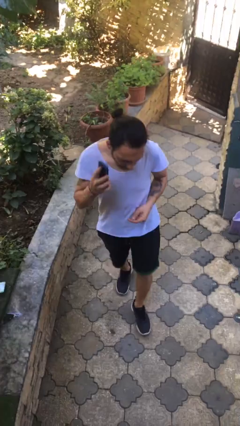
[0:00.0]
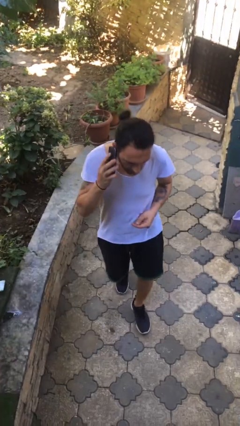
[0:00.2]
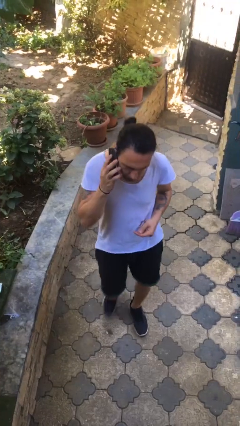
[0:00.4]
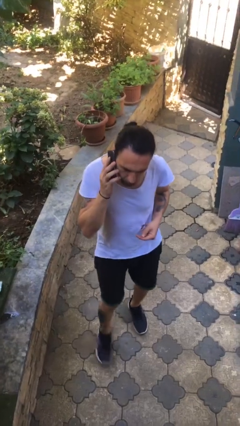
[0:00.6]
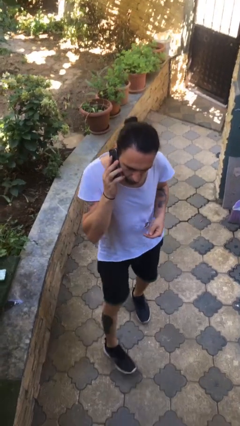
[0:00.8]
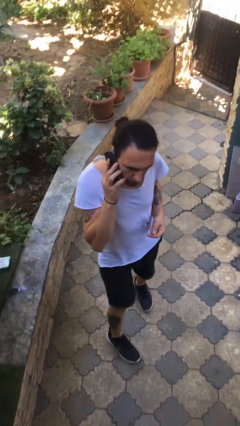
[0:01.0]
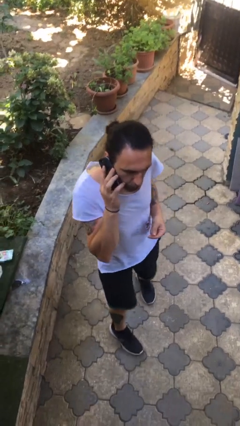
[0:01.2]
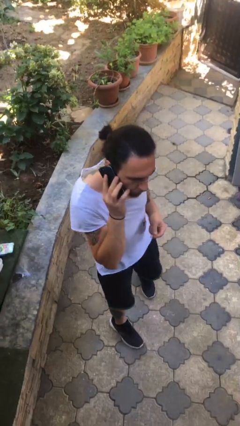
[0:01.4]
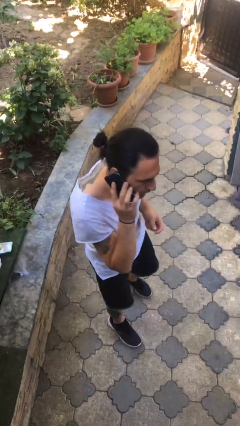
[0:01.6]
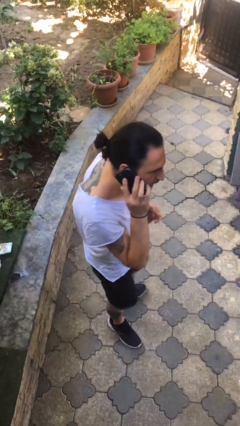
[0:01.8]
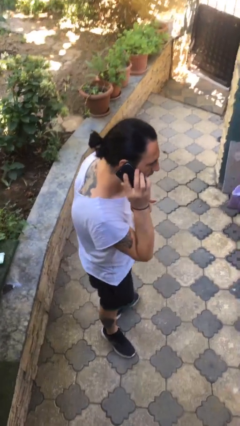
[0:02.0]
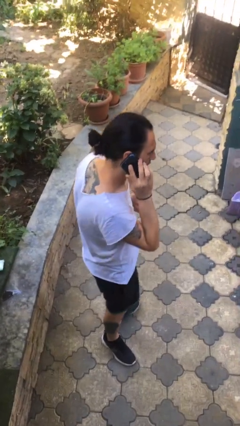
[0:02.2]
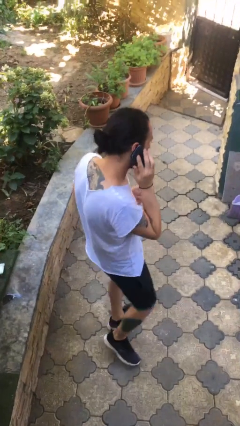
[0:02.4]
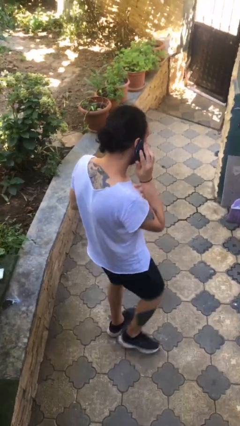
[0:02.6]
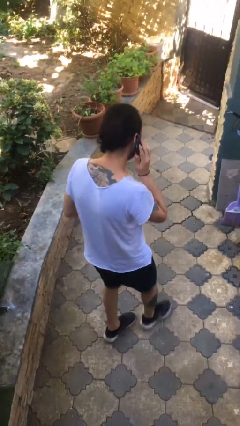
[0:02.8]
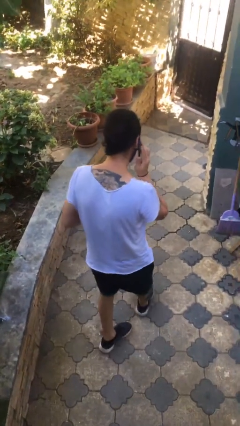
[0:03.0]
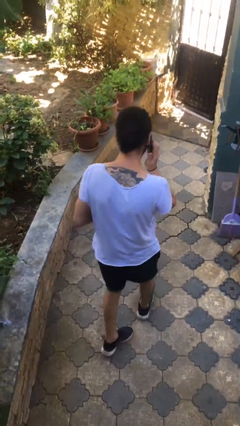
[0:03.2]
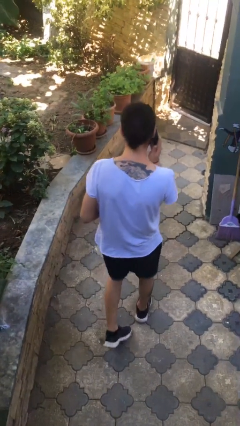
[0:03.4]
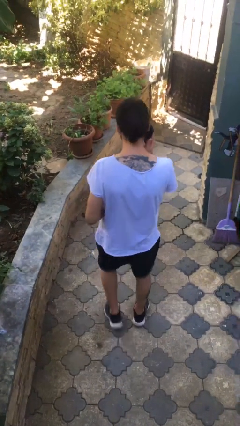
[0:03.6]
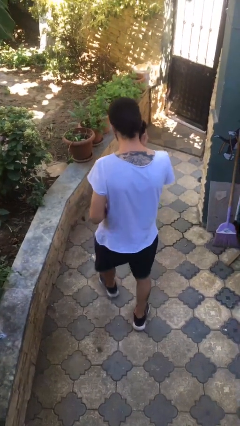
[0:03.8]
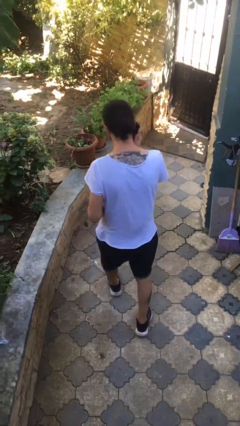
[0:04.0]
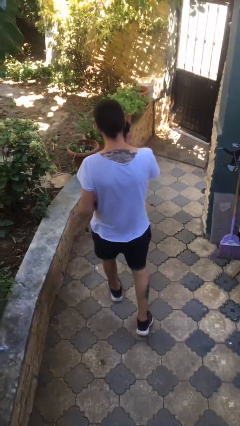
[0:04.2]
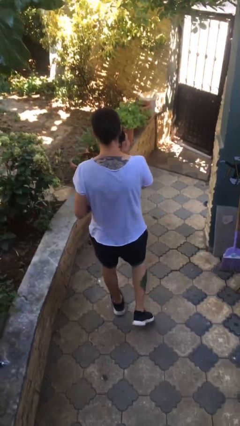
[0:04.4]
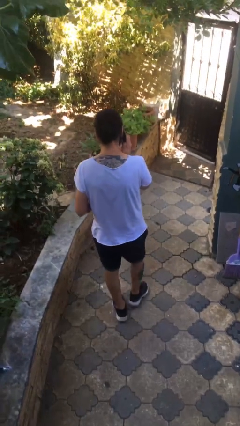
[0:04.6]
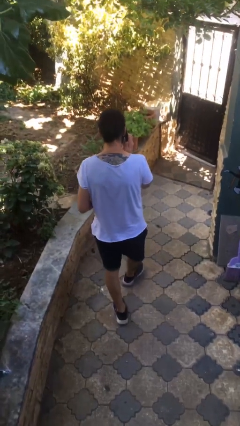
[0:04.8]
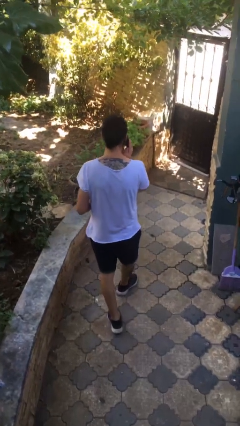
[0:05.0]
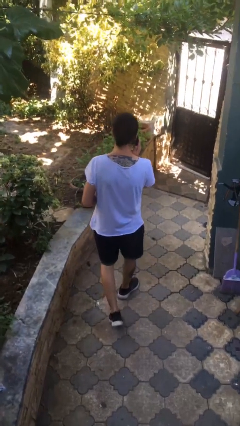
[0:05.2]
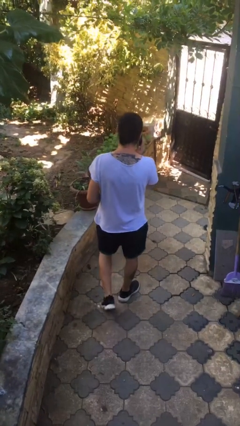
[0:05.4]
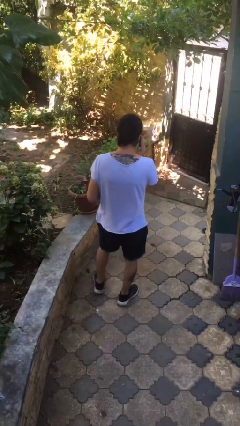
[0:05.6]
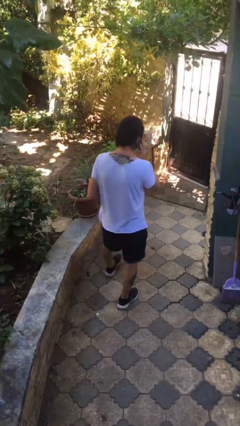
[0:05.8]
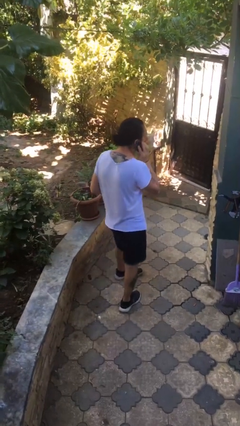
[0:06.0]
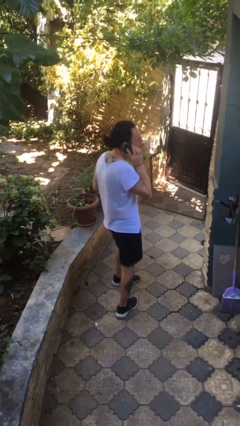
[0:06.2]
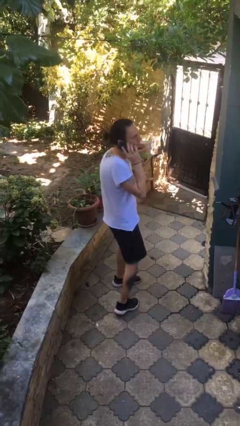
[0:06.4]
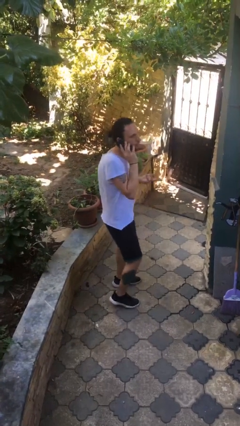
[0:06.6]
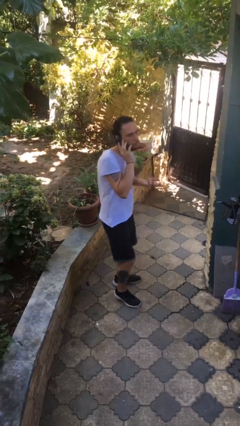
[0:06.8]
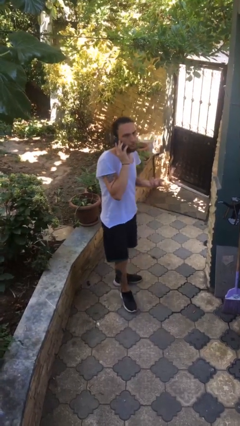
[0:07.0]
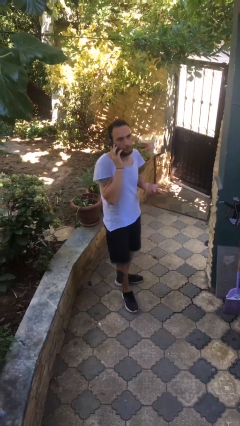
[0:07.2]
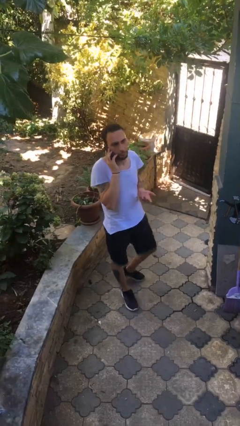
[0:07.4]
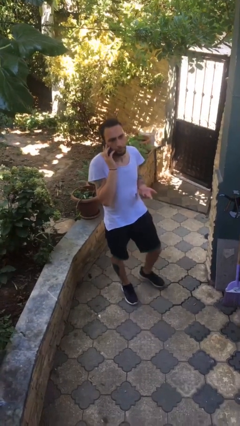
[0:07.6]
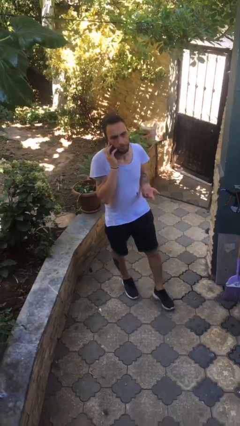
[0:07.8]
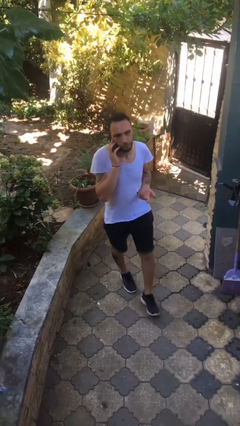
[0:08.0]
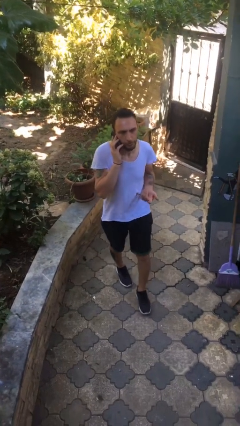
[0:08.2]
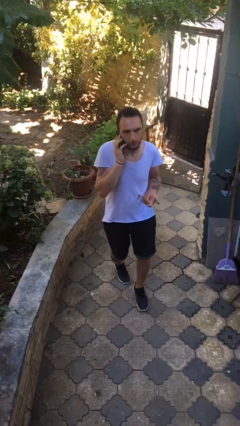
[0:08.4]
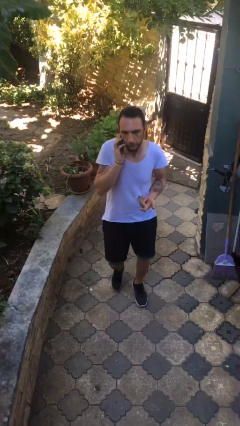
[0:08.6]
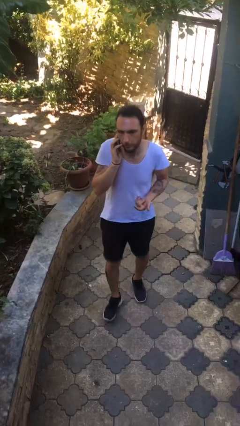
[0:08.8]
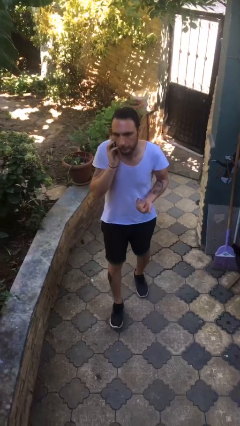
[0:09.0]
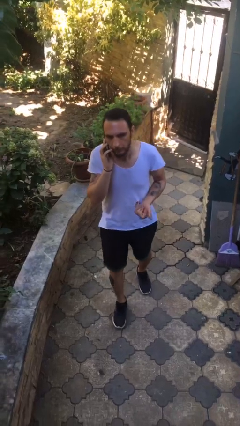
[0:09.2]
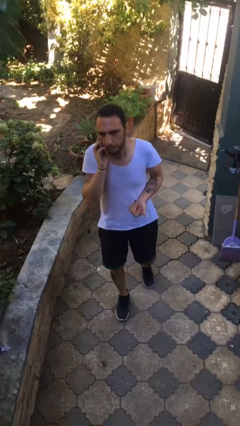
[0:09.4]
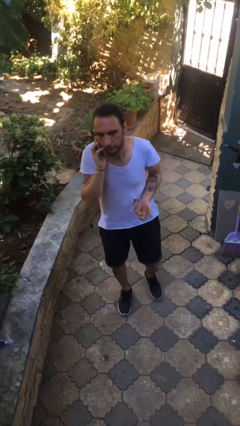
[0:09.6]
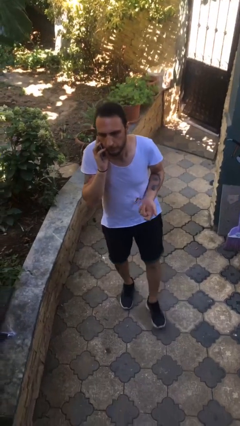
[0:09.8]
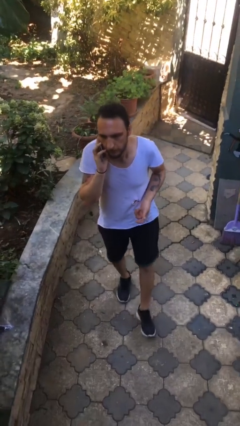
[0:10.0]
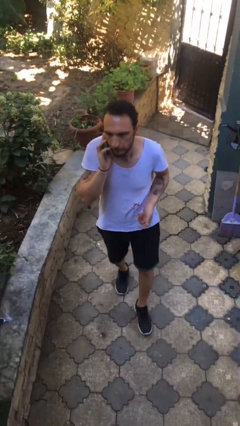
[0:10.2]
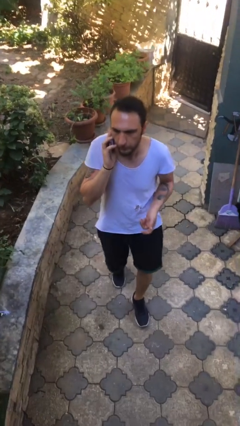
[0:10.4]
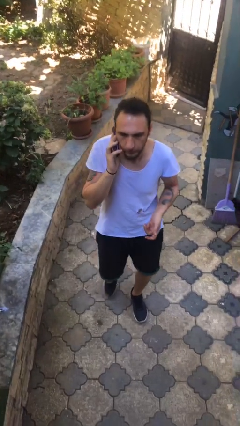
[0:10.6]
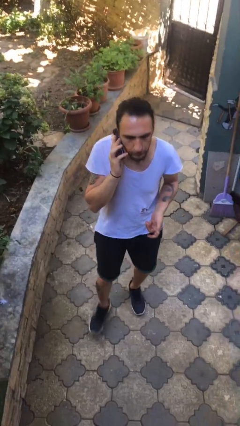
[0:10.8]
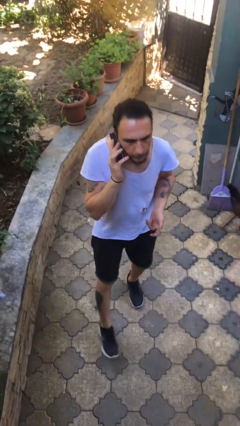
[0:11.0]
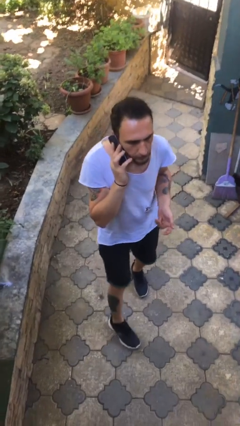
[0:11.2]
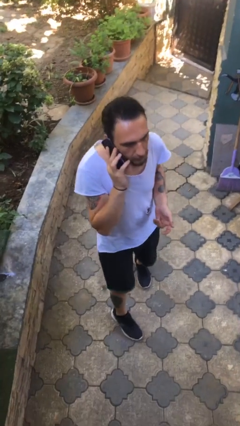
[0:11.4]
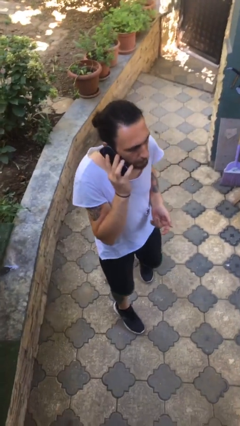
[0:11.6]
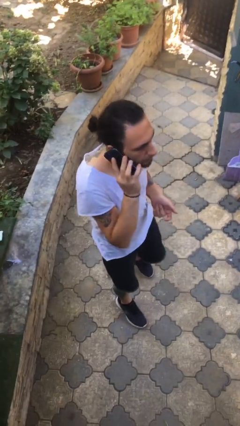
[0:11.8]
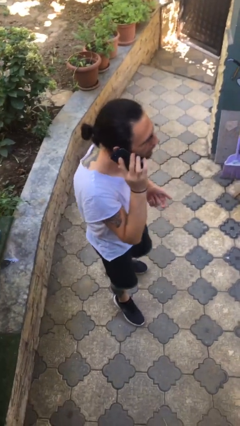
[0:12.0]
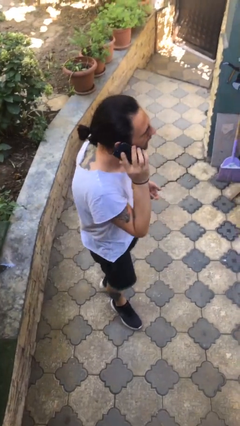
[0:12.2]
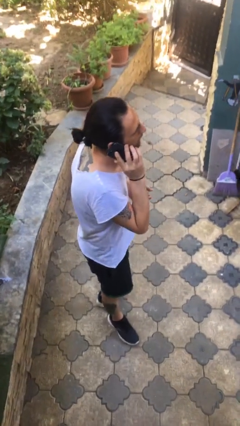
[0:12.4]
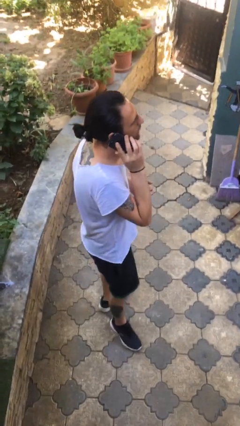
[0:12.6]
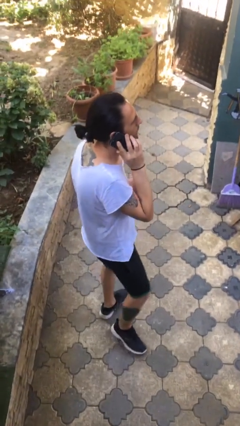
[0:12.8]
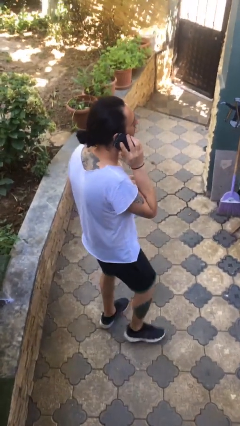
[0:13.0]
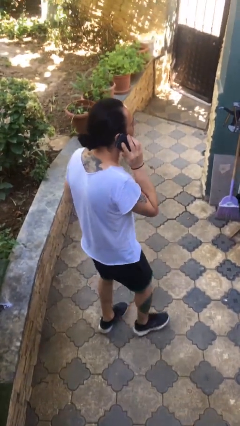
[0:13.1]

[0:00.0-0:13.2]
person talks on phone

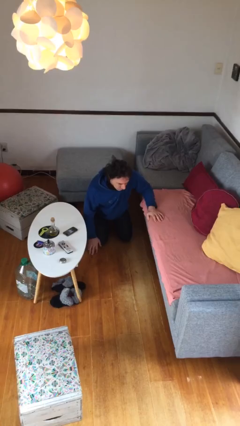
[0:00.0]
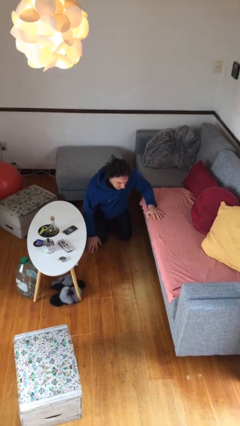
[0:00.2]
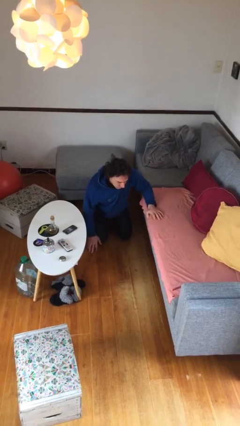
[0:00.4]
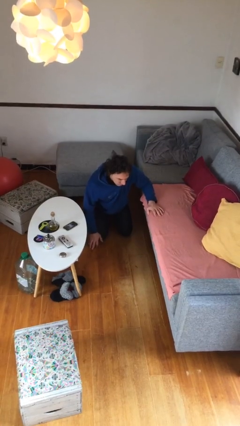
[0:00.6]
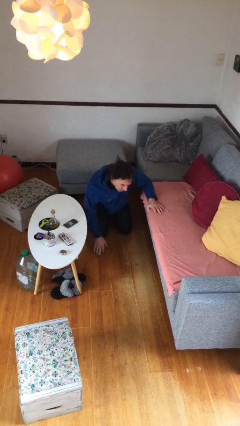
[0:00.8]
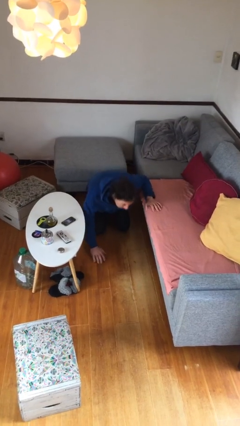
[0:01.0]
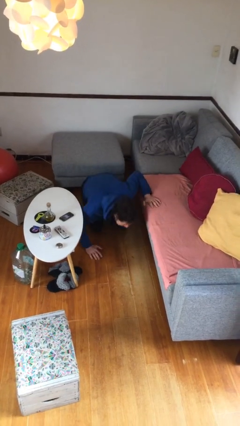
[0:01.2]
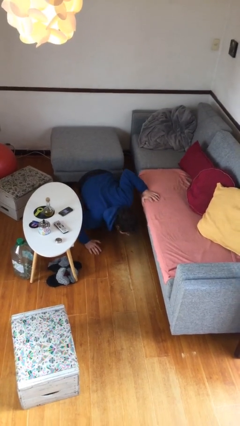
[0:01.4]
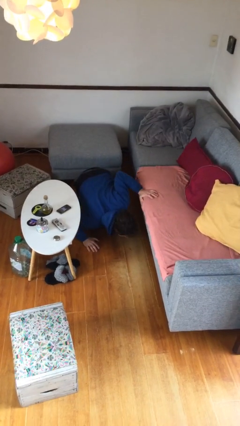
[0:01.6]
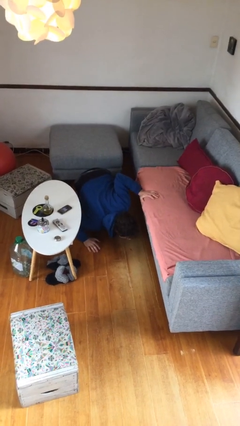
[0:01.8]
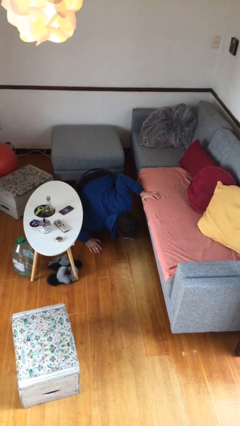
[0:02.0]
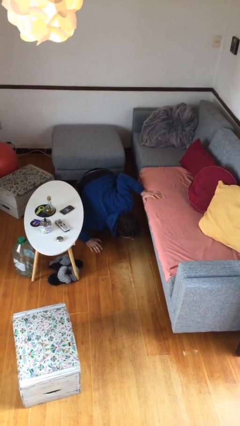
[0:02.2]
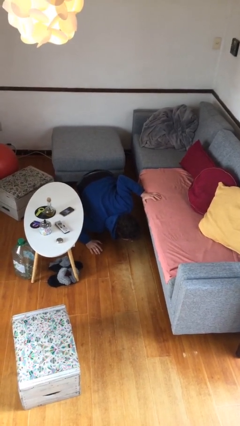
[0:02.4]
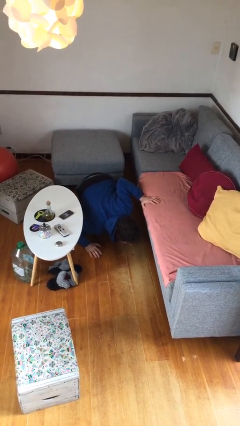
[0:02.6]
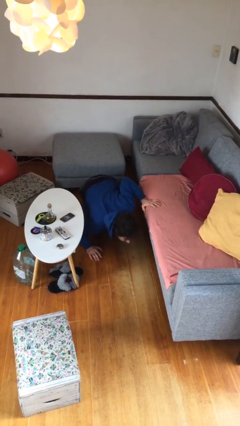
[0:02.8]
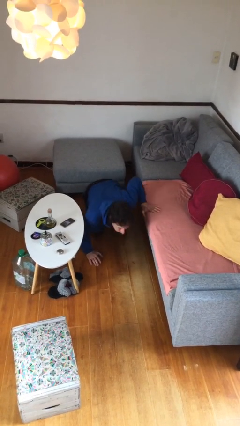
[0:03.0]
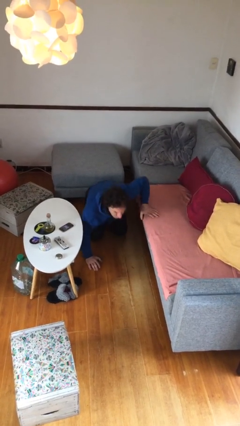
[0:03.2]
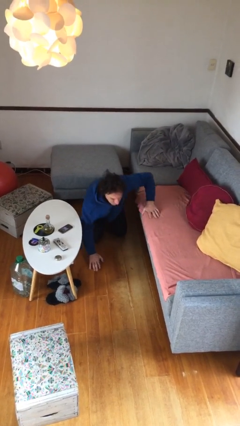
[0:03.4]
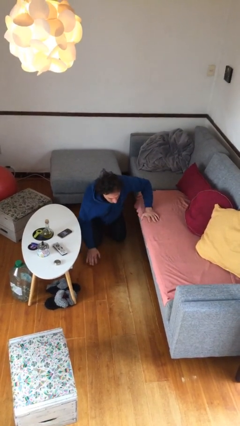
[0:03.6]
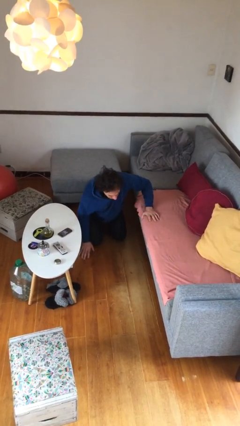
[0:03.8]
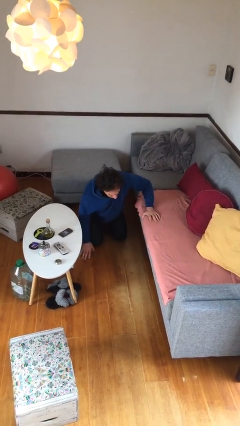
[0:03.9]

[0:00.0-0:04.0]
person searches under couch

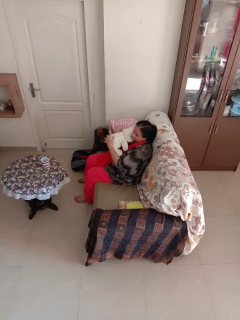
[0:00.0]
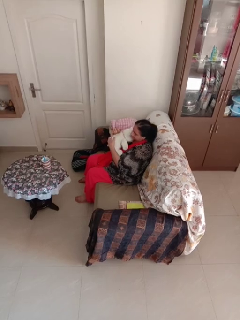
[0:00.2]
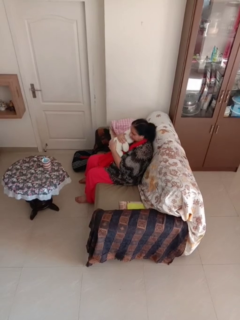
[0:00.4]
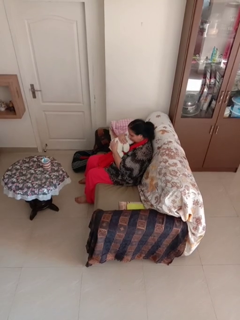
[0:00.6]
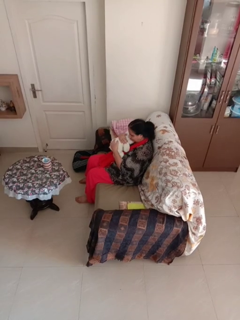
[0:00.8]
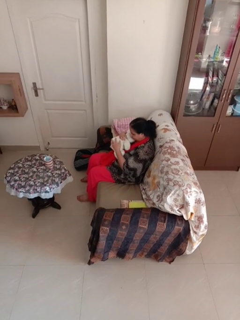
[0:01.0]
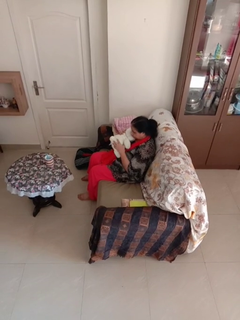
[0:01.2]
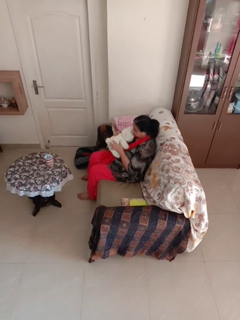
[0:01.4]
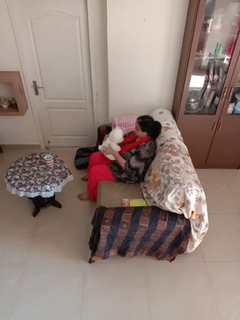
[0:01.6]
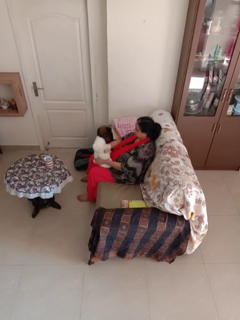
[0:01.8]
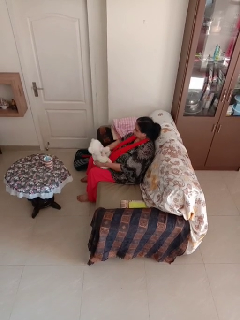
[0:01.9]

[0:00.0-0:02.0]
person hugs stuffed animal
